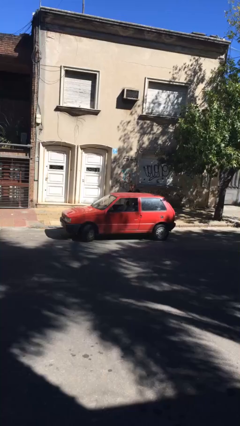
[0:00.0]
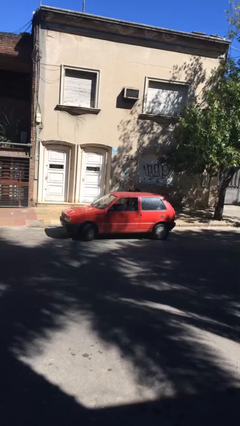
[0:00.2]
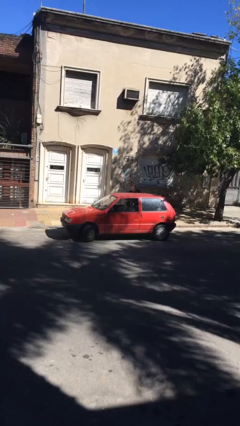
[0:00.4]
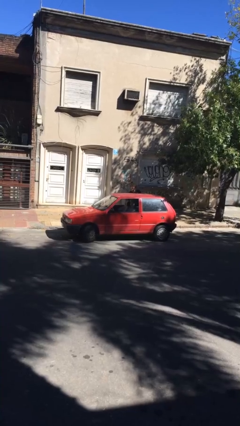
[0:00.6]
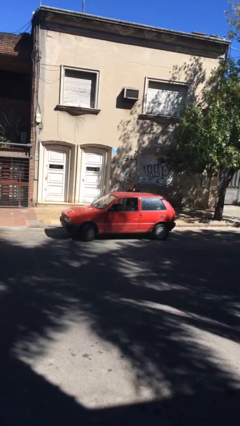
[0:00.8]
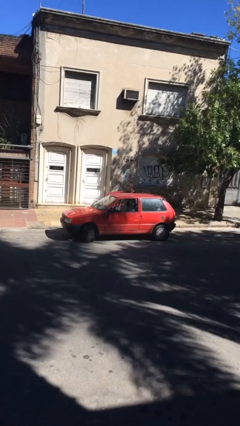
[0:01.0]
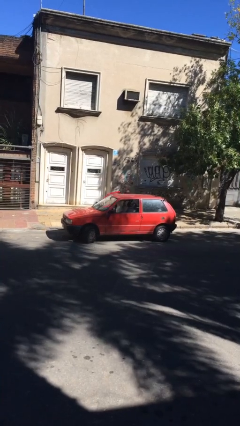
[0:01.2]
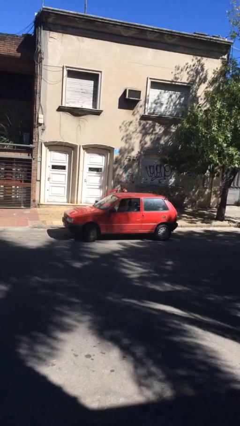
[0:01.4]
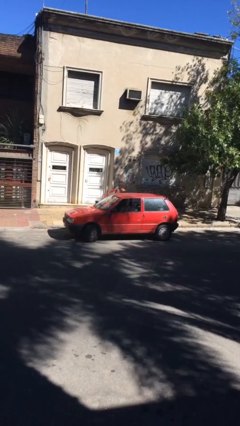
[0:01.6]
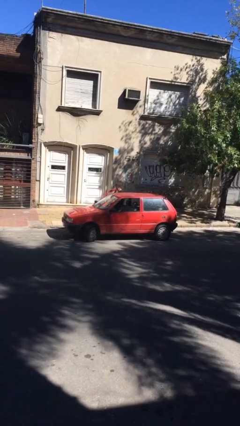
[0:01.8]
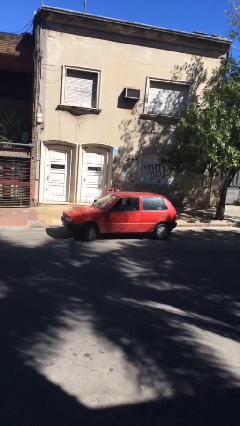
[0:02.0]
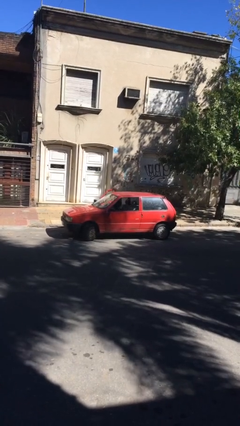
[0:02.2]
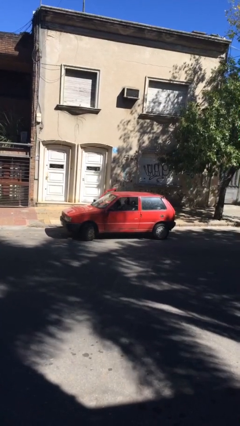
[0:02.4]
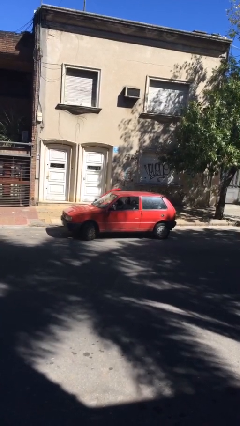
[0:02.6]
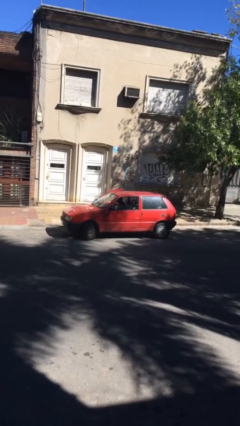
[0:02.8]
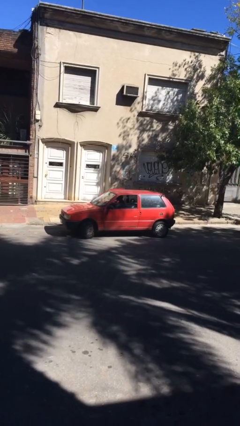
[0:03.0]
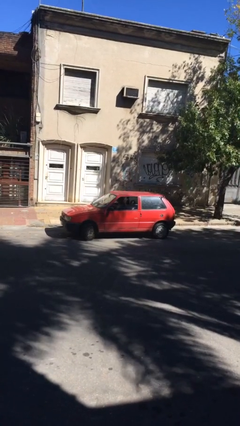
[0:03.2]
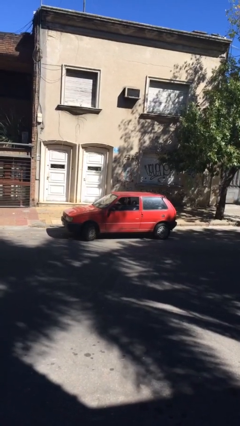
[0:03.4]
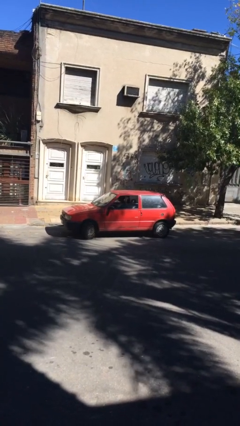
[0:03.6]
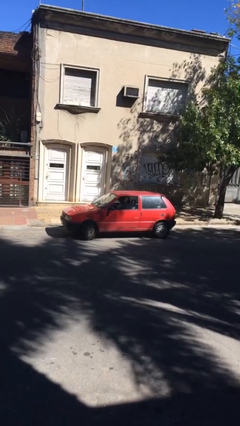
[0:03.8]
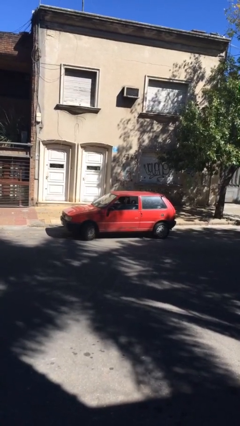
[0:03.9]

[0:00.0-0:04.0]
car picks up person

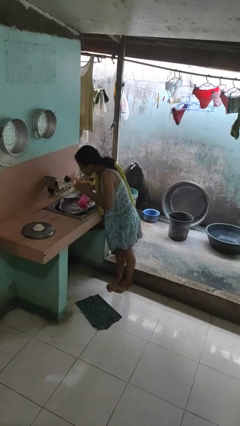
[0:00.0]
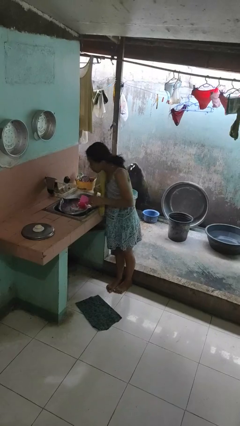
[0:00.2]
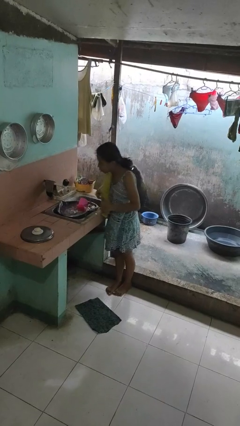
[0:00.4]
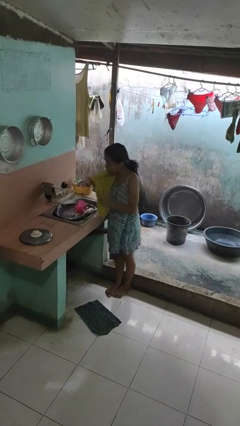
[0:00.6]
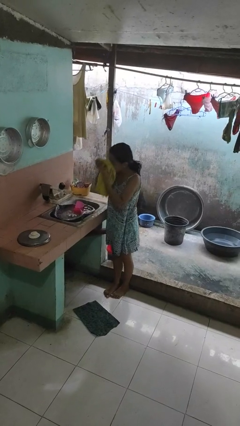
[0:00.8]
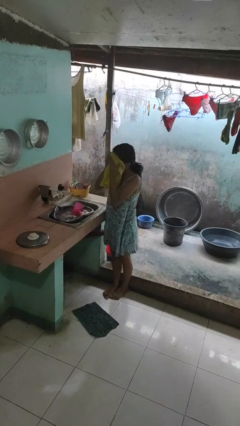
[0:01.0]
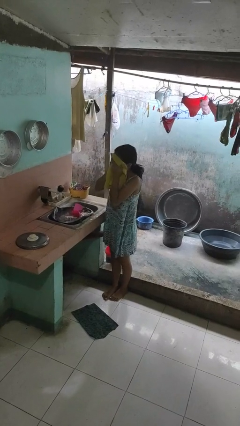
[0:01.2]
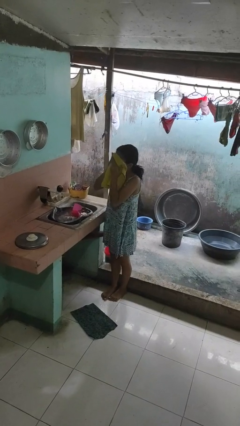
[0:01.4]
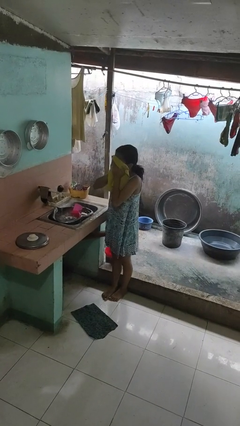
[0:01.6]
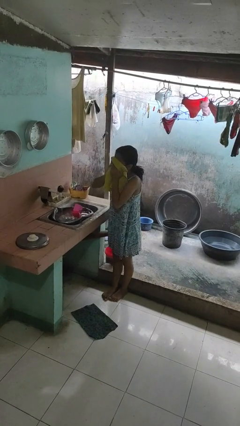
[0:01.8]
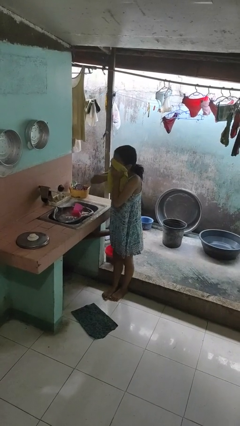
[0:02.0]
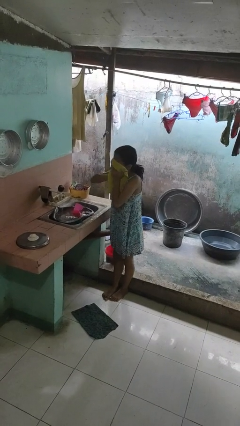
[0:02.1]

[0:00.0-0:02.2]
person dries face with towel

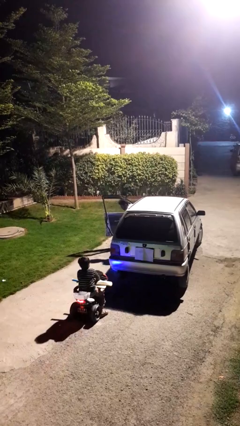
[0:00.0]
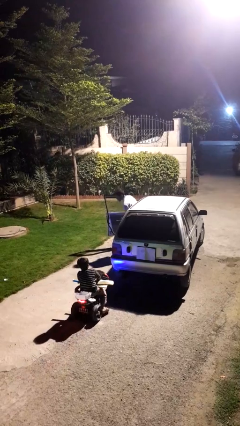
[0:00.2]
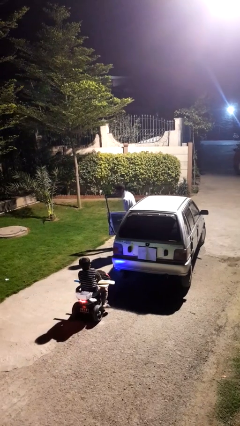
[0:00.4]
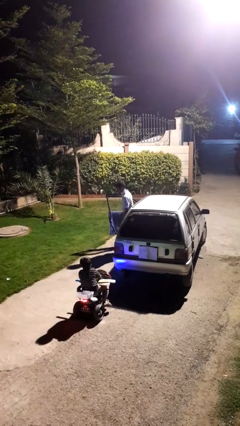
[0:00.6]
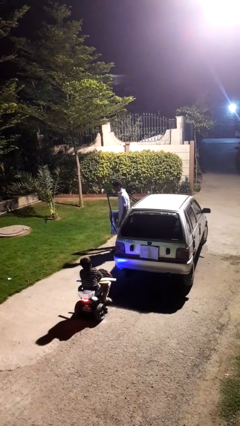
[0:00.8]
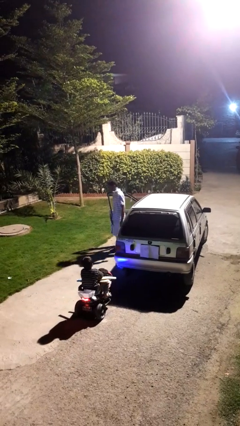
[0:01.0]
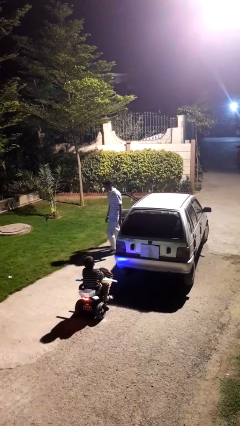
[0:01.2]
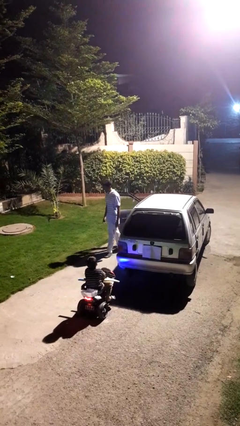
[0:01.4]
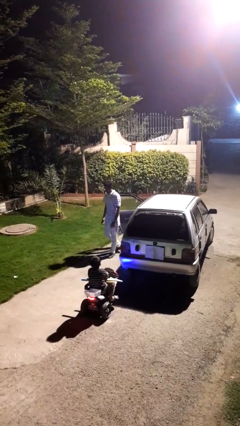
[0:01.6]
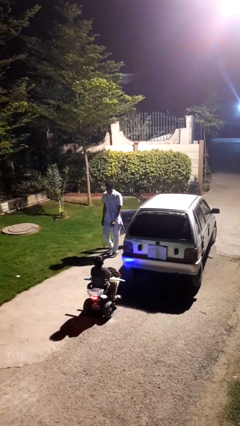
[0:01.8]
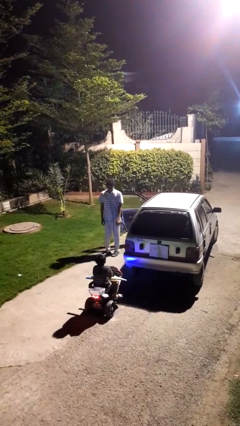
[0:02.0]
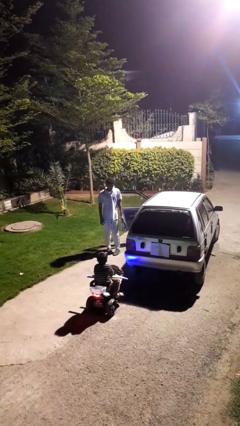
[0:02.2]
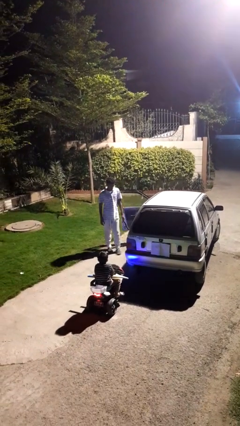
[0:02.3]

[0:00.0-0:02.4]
person exits car

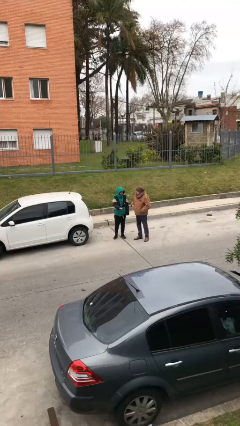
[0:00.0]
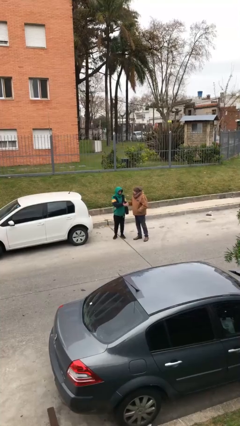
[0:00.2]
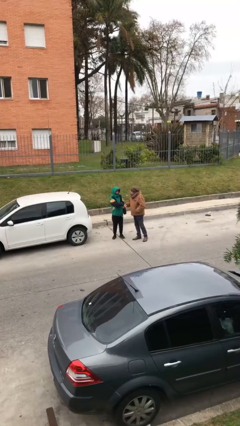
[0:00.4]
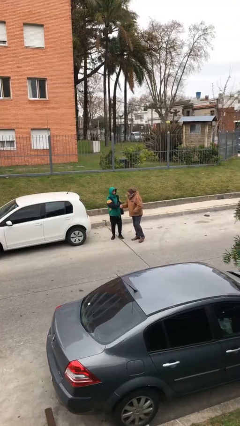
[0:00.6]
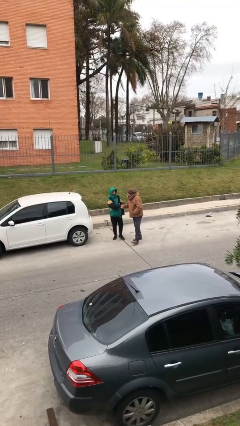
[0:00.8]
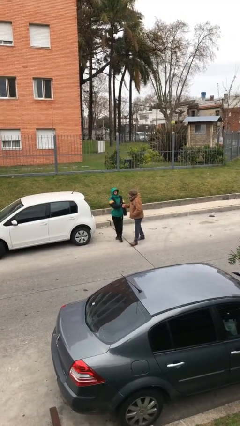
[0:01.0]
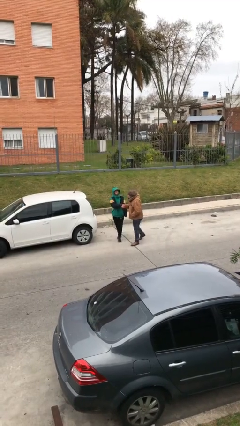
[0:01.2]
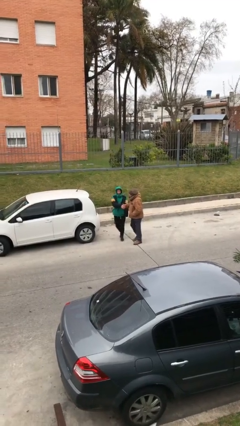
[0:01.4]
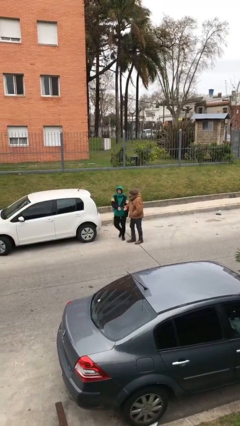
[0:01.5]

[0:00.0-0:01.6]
person shakes hand

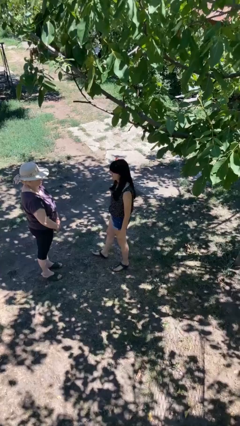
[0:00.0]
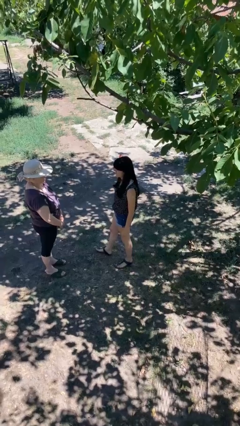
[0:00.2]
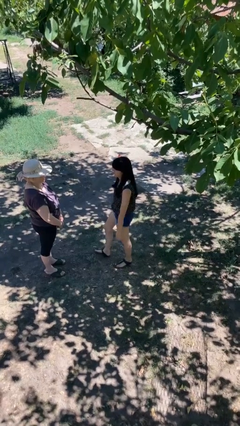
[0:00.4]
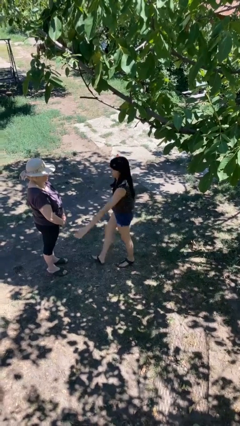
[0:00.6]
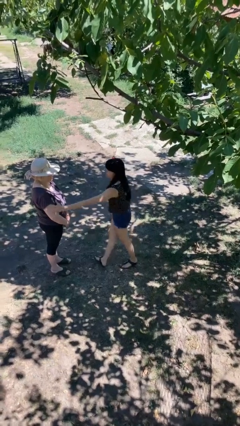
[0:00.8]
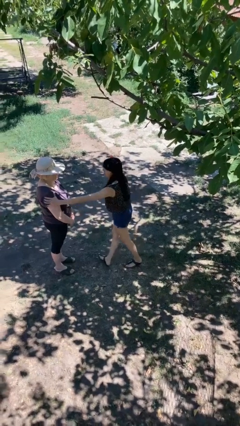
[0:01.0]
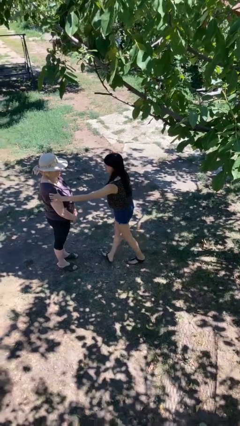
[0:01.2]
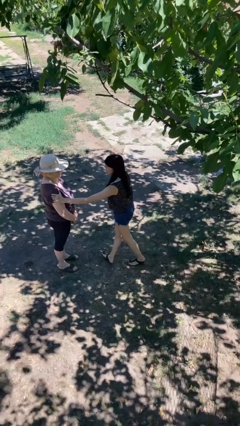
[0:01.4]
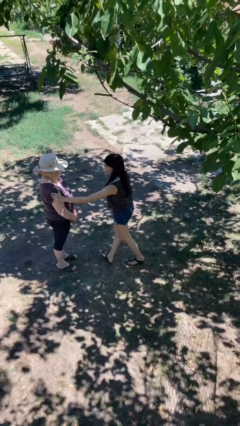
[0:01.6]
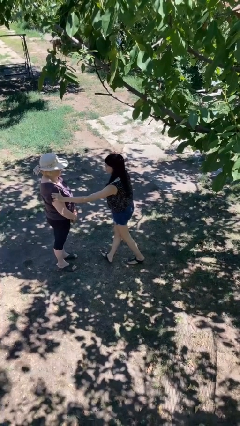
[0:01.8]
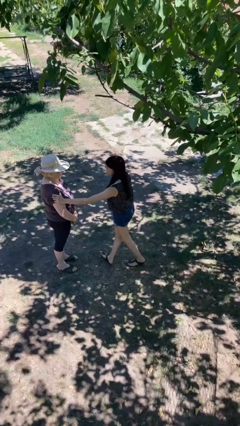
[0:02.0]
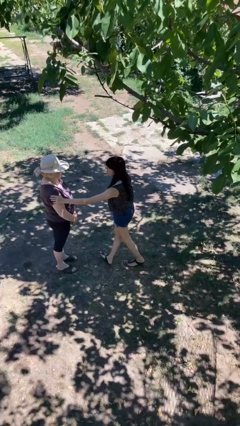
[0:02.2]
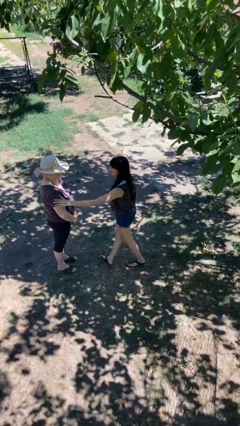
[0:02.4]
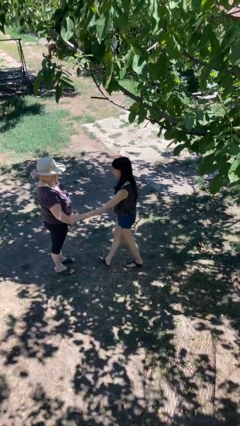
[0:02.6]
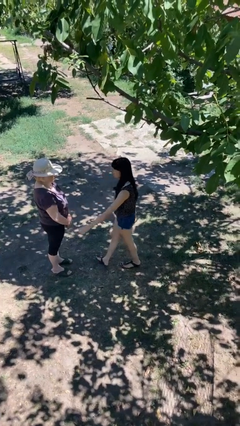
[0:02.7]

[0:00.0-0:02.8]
person grabs person by bicep

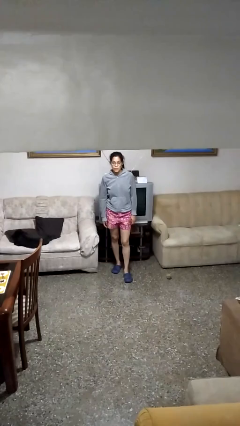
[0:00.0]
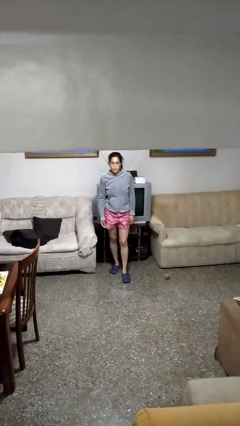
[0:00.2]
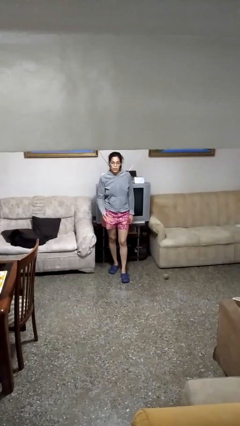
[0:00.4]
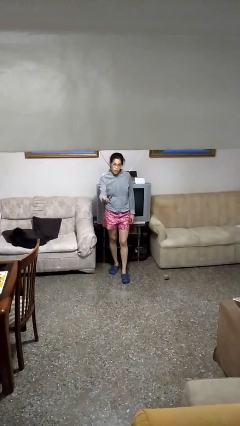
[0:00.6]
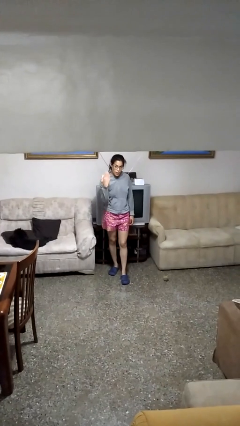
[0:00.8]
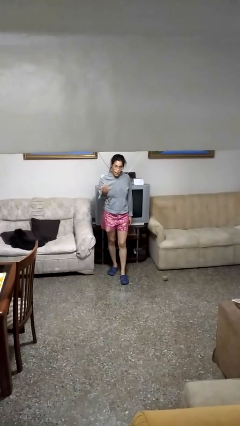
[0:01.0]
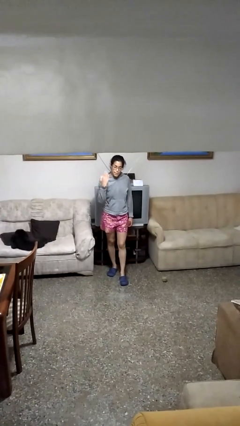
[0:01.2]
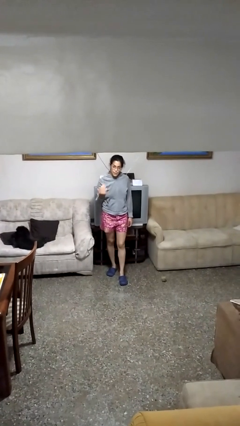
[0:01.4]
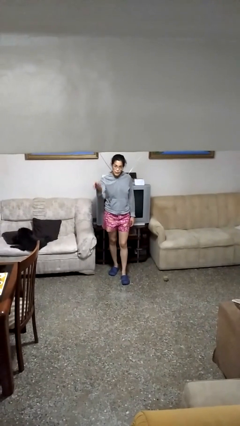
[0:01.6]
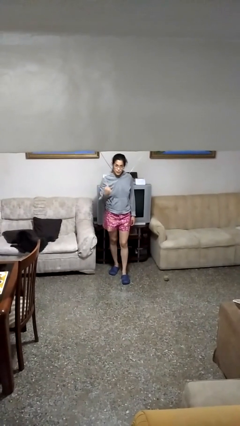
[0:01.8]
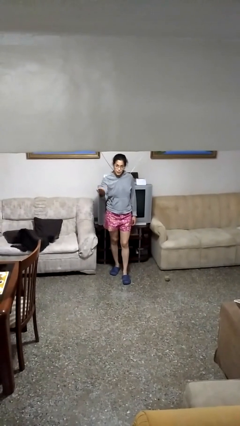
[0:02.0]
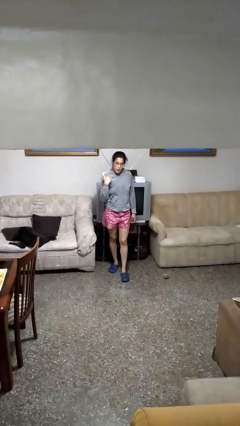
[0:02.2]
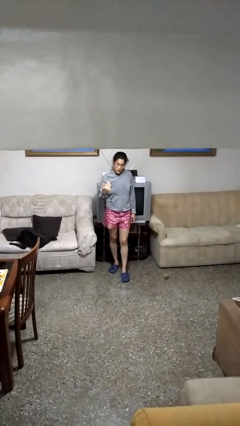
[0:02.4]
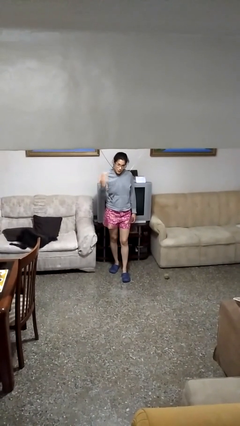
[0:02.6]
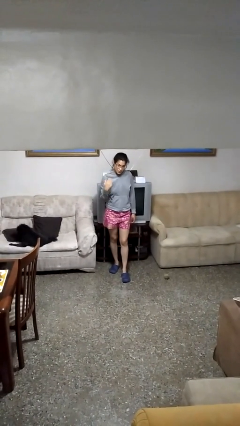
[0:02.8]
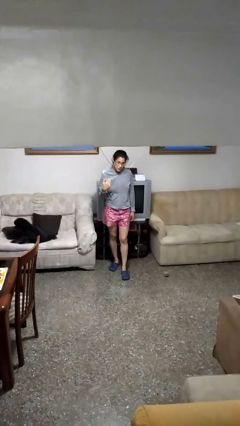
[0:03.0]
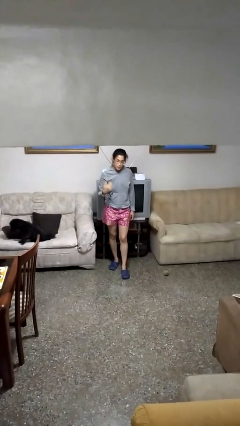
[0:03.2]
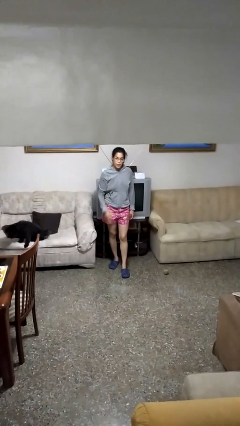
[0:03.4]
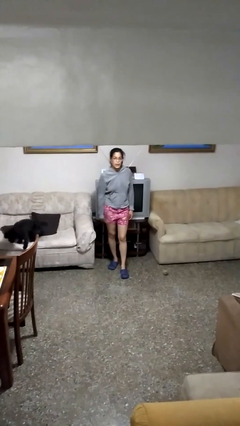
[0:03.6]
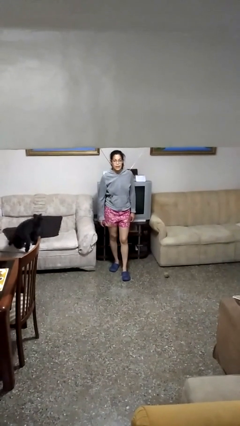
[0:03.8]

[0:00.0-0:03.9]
person gestures come here

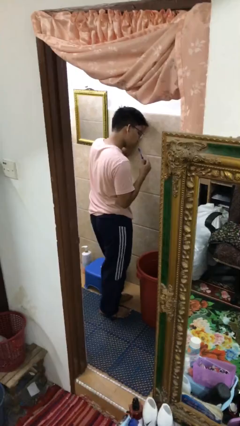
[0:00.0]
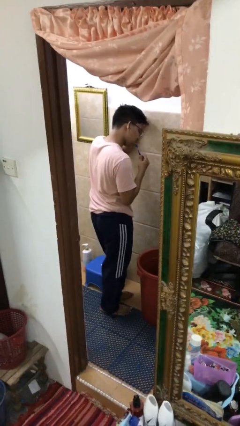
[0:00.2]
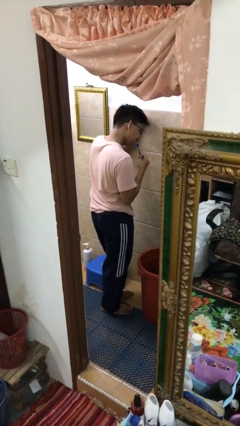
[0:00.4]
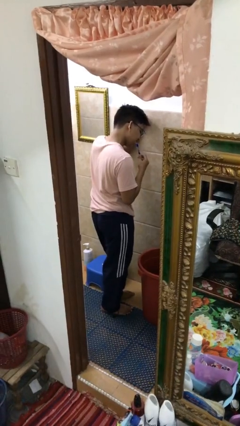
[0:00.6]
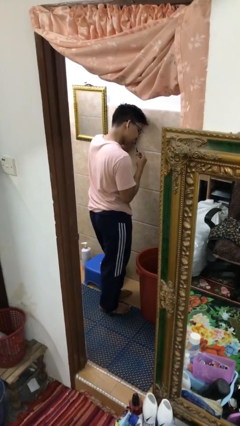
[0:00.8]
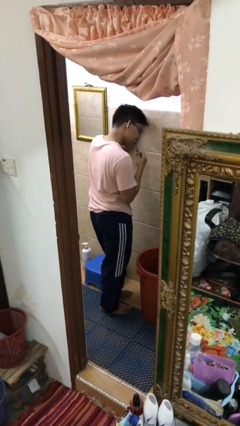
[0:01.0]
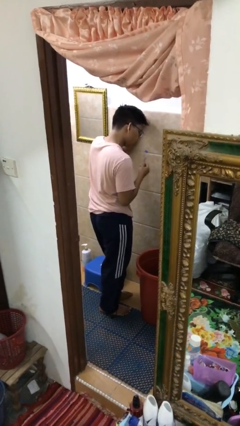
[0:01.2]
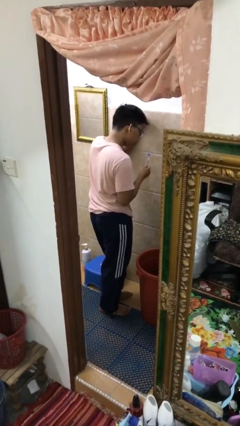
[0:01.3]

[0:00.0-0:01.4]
person brushes teeth
